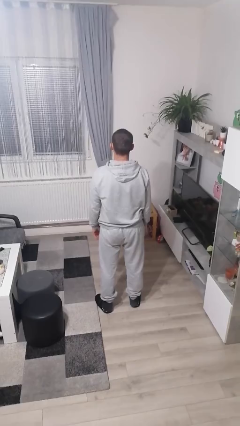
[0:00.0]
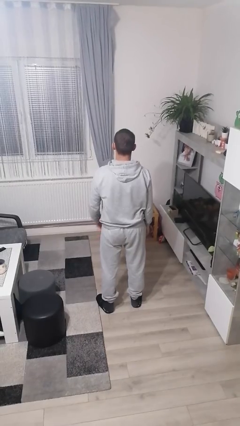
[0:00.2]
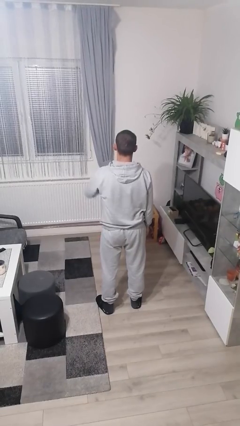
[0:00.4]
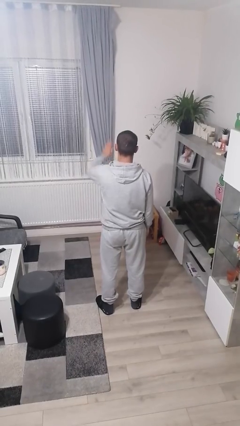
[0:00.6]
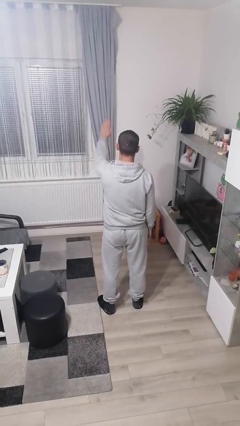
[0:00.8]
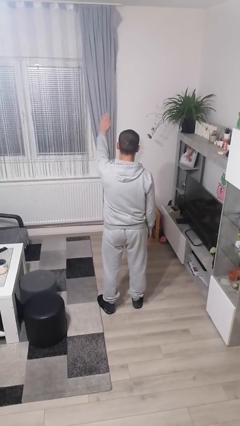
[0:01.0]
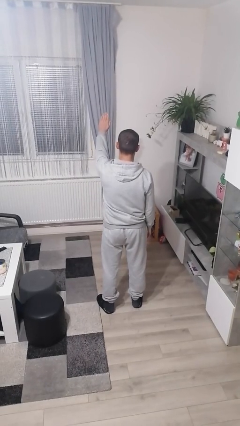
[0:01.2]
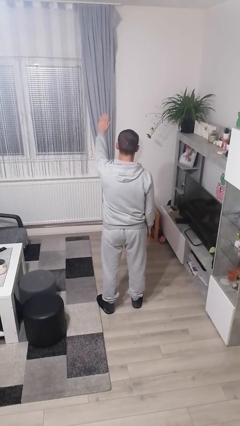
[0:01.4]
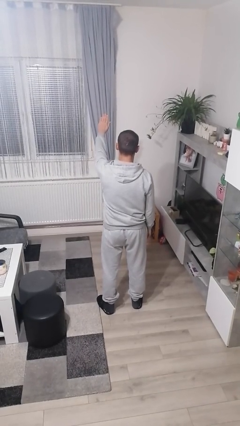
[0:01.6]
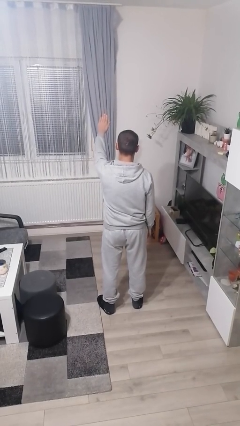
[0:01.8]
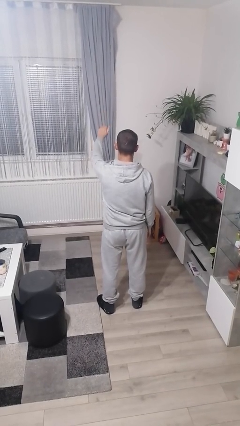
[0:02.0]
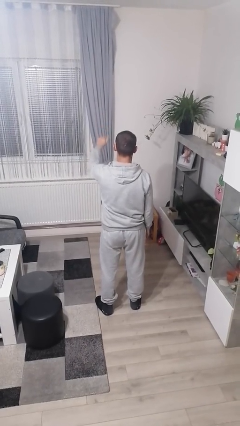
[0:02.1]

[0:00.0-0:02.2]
person gestures stop

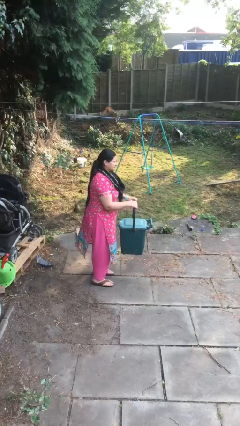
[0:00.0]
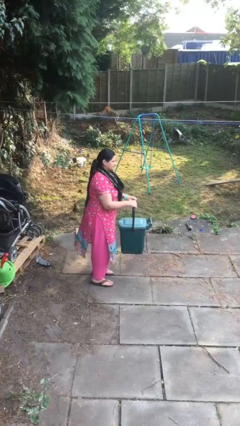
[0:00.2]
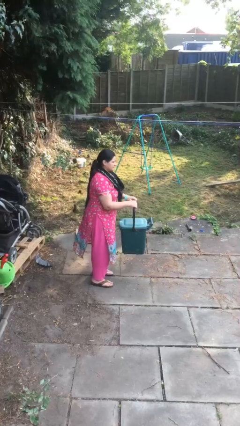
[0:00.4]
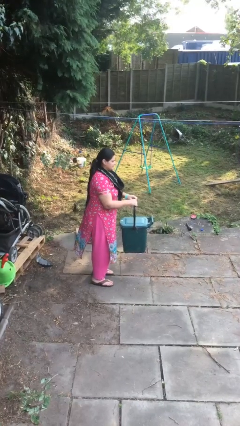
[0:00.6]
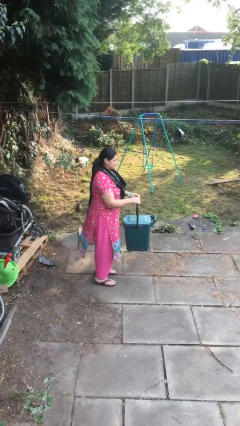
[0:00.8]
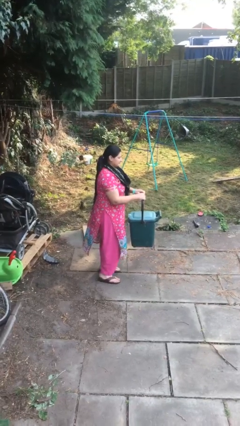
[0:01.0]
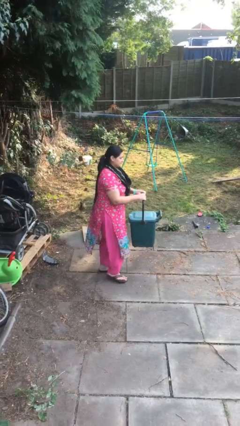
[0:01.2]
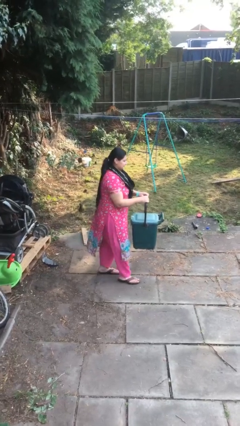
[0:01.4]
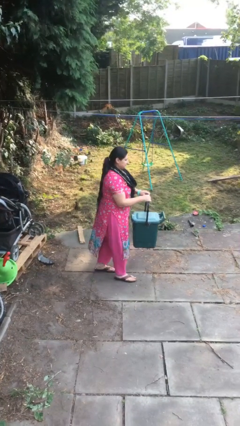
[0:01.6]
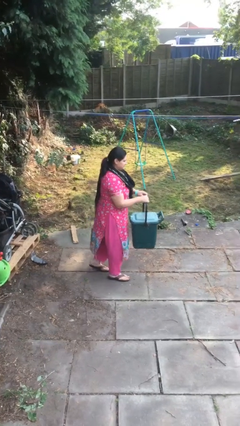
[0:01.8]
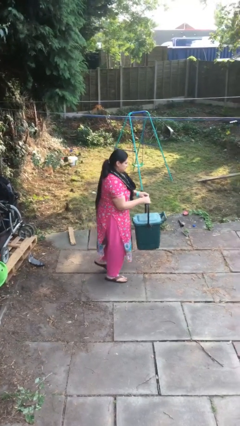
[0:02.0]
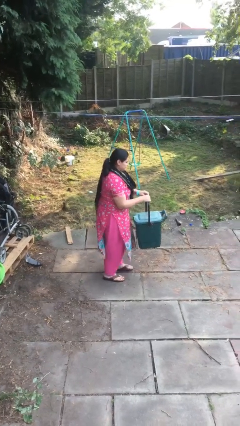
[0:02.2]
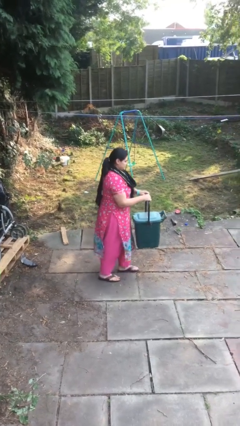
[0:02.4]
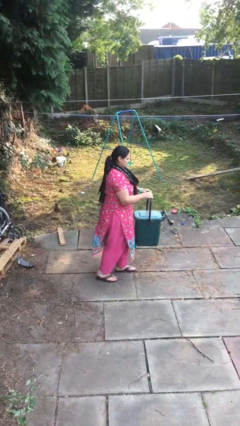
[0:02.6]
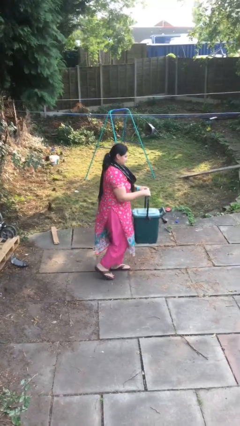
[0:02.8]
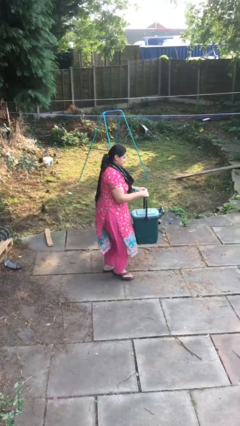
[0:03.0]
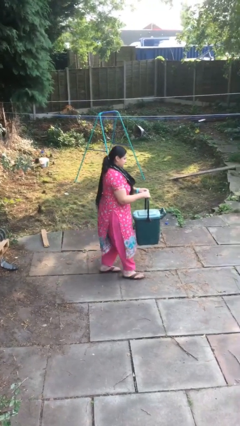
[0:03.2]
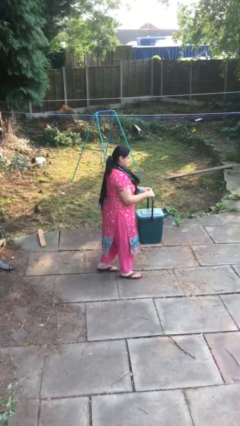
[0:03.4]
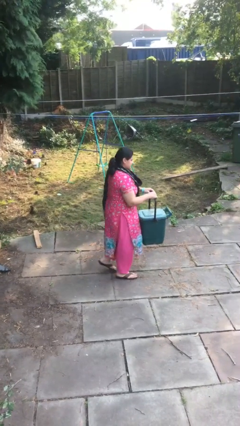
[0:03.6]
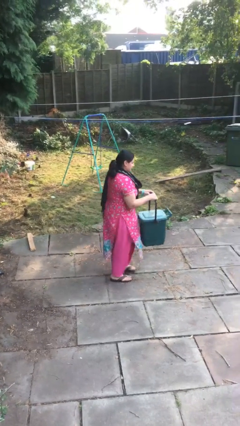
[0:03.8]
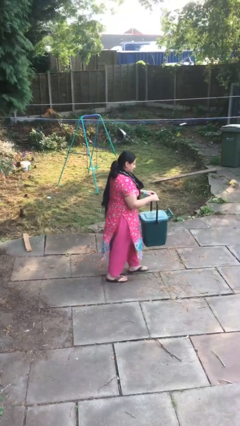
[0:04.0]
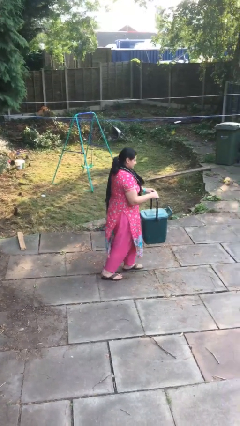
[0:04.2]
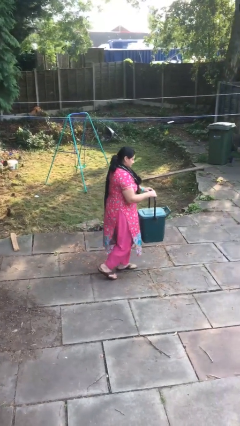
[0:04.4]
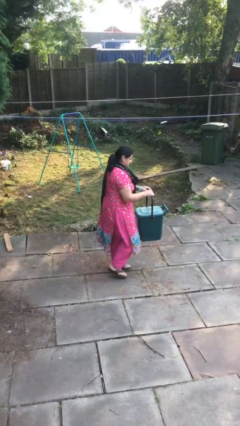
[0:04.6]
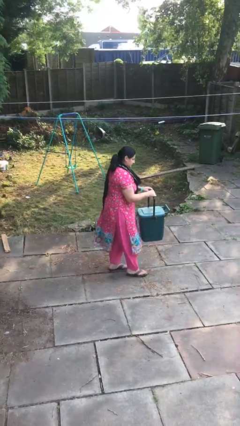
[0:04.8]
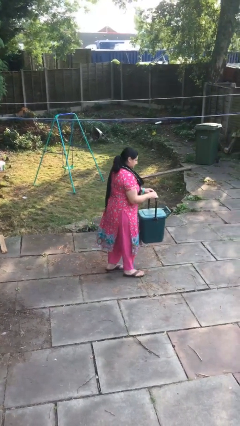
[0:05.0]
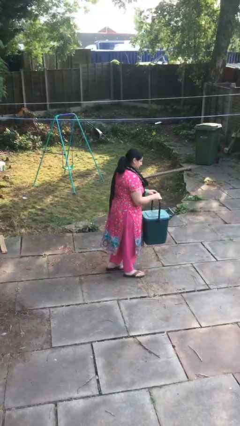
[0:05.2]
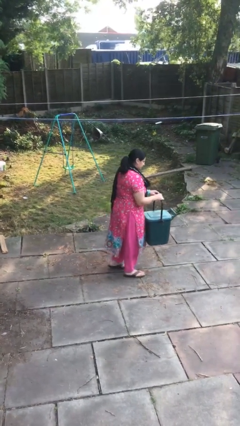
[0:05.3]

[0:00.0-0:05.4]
person carries heavy object

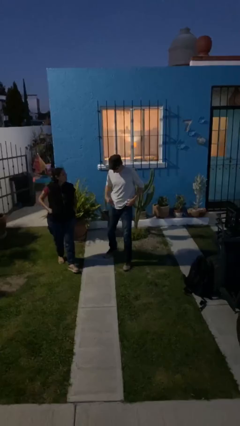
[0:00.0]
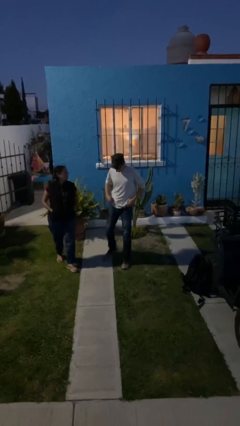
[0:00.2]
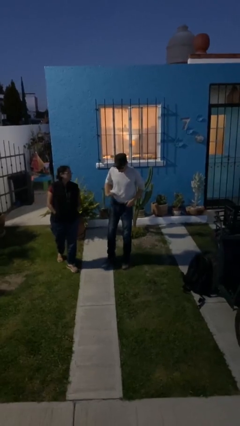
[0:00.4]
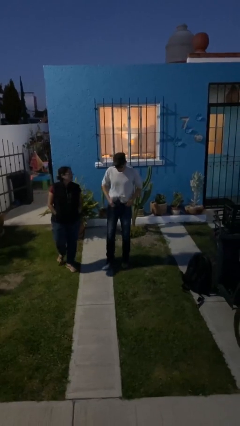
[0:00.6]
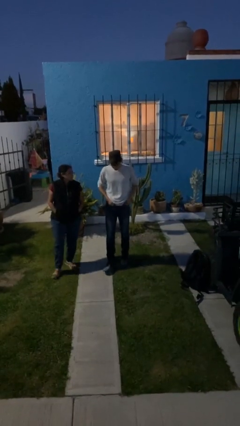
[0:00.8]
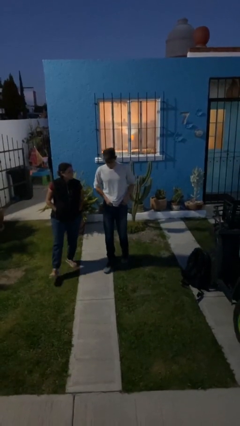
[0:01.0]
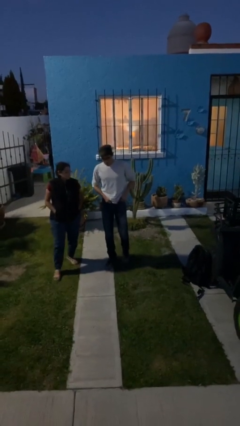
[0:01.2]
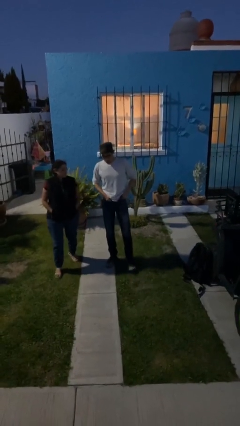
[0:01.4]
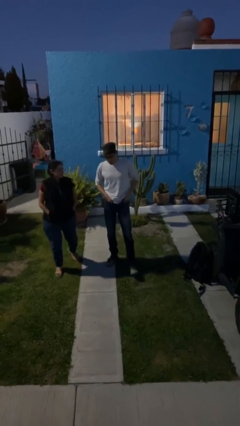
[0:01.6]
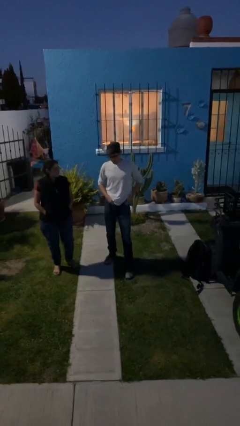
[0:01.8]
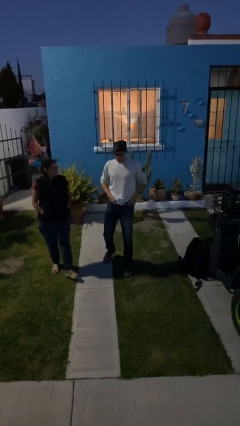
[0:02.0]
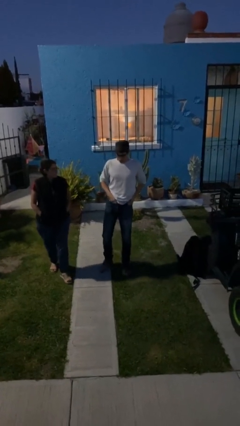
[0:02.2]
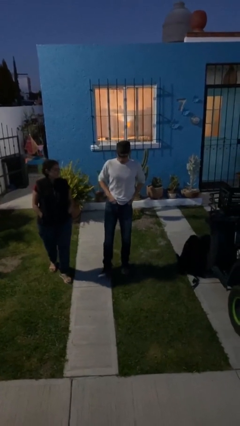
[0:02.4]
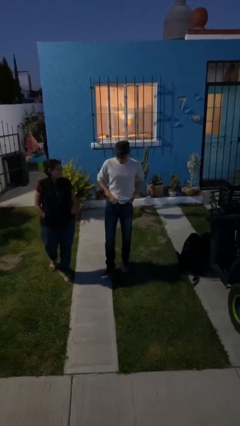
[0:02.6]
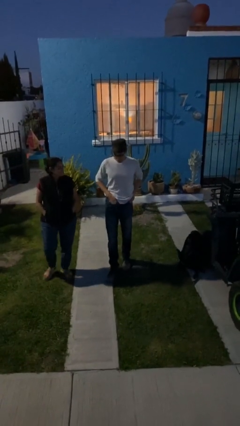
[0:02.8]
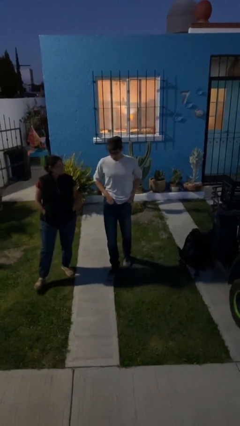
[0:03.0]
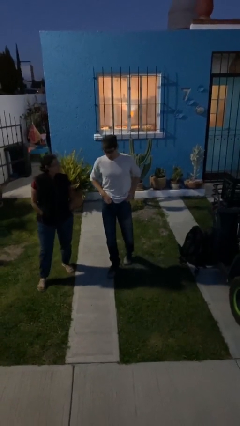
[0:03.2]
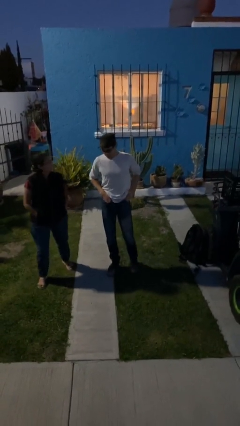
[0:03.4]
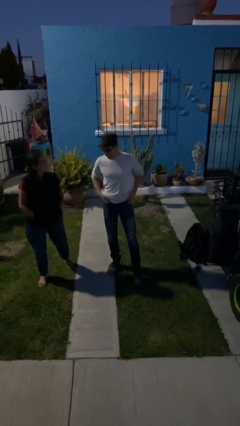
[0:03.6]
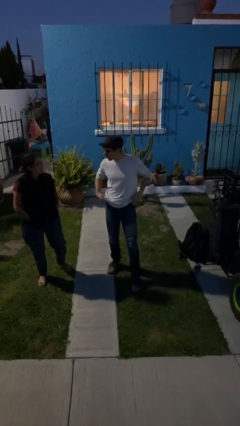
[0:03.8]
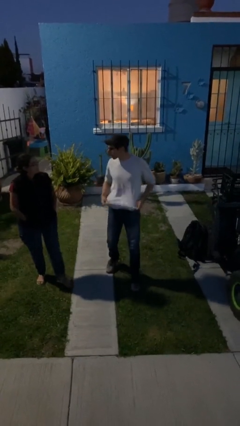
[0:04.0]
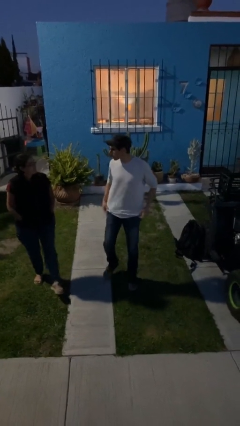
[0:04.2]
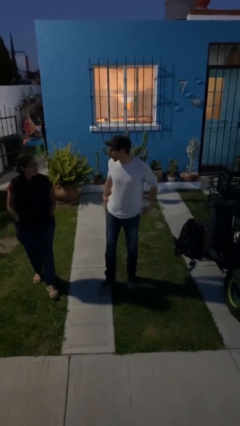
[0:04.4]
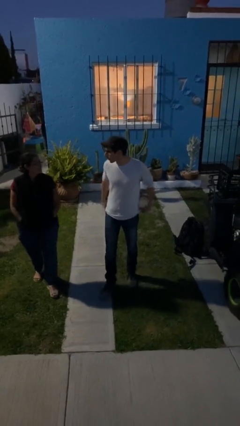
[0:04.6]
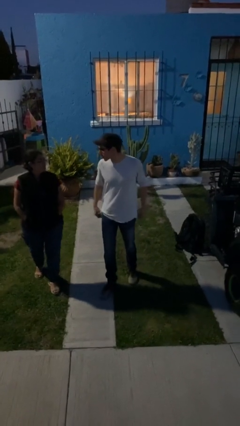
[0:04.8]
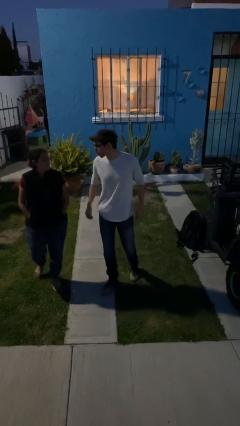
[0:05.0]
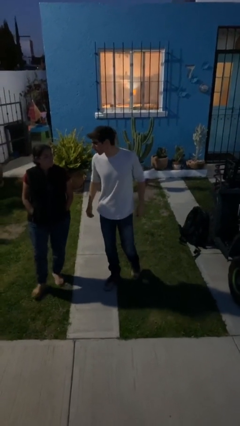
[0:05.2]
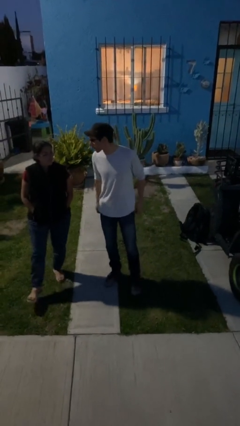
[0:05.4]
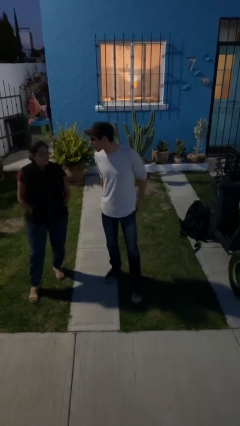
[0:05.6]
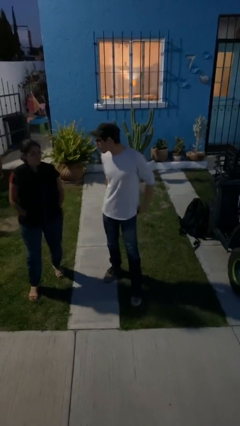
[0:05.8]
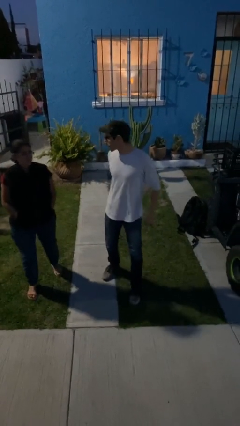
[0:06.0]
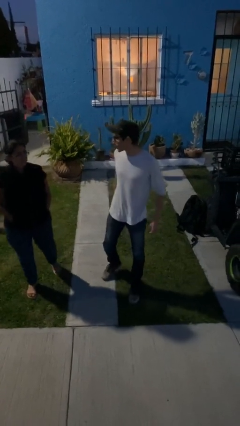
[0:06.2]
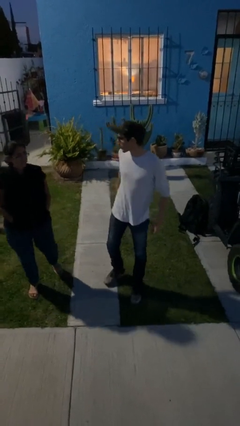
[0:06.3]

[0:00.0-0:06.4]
person talks to person

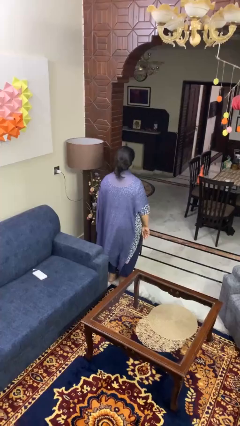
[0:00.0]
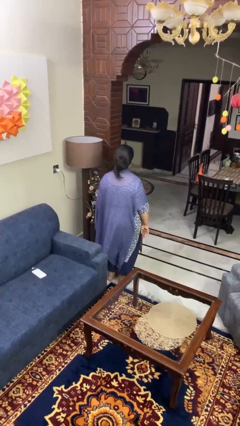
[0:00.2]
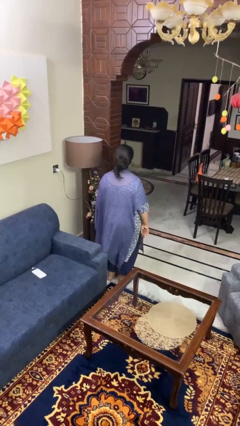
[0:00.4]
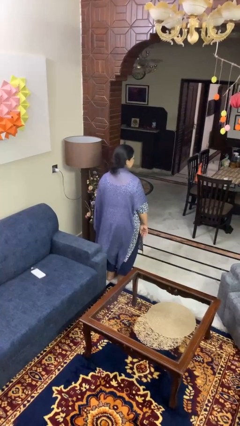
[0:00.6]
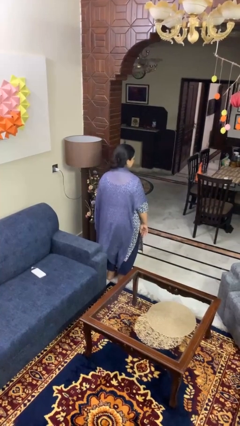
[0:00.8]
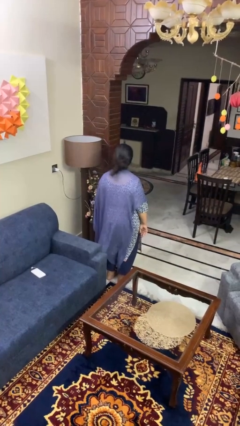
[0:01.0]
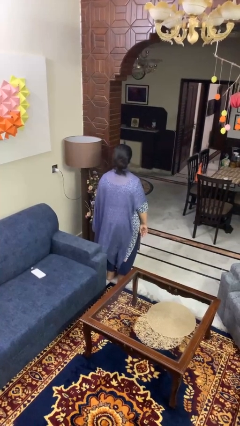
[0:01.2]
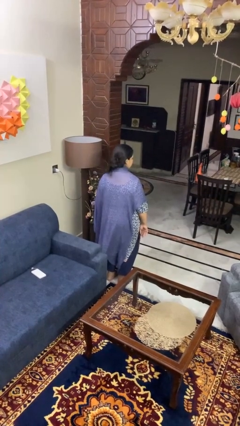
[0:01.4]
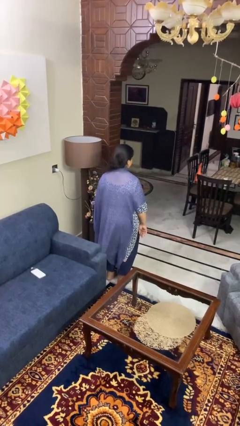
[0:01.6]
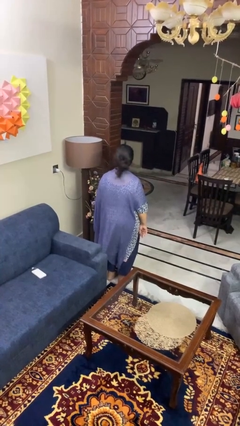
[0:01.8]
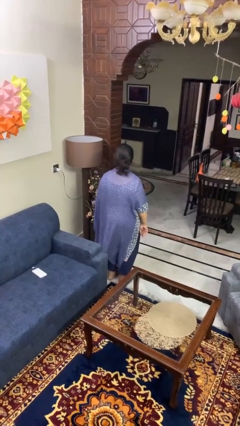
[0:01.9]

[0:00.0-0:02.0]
person shakes head

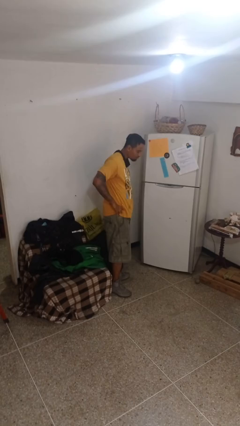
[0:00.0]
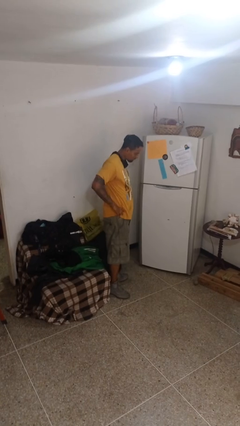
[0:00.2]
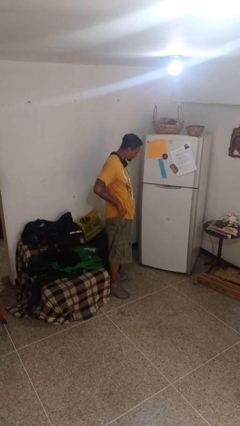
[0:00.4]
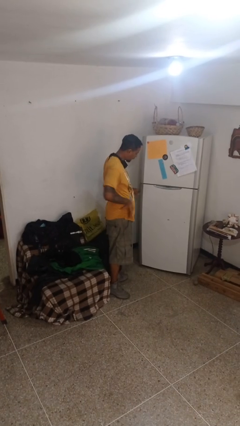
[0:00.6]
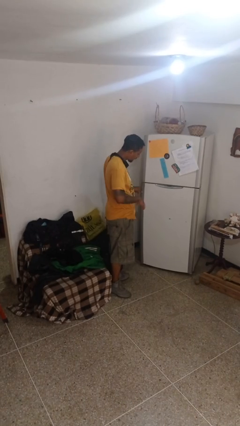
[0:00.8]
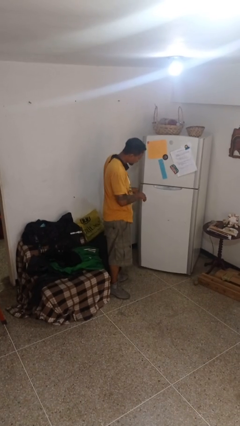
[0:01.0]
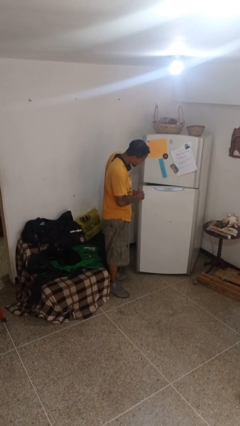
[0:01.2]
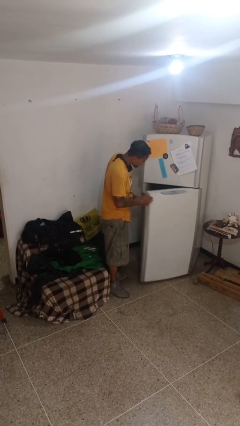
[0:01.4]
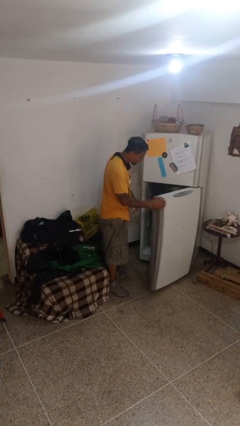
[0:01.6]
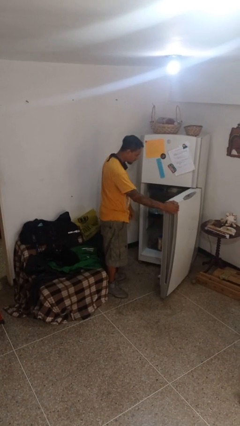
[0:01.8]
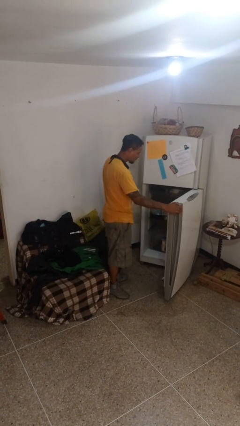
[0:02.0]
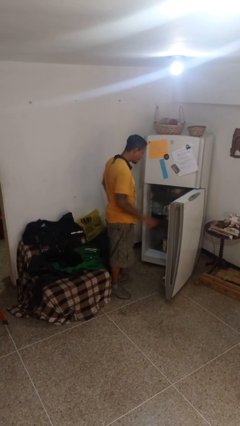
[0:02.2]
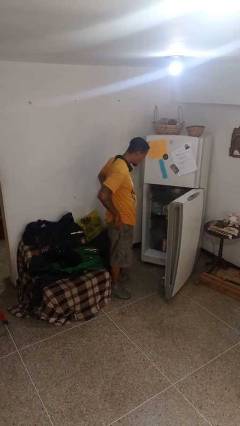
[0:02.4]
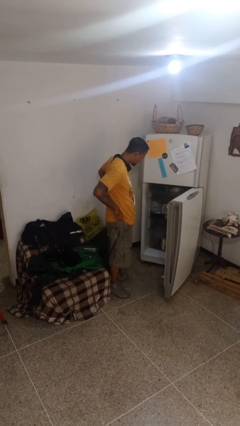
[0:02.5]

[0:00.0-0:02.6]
person opens refrigerator
